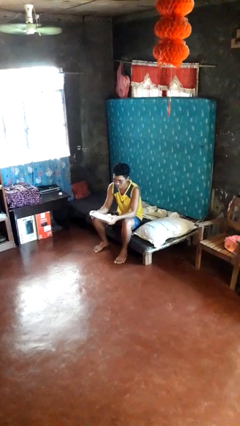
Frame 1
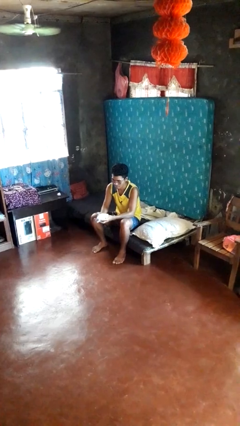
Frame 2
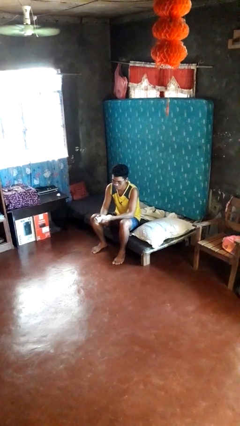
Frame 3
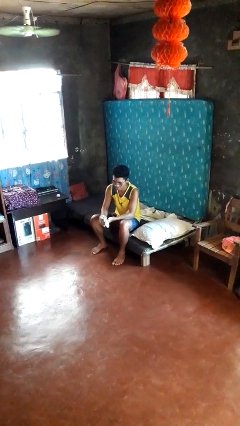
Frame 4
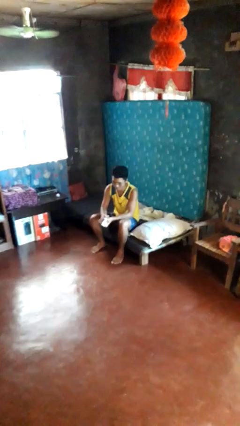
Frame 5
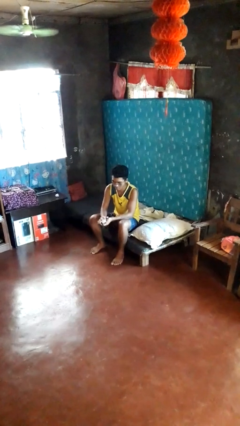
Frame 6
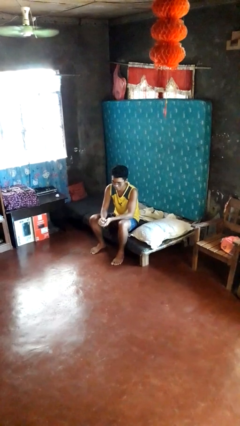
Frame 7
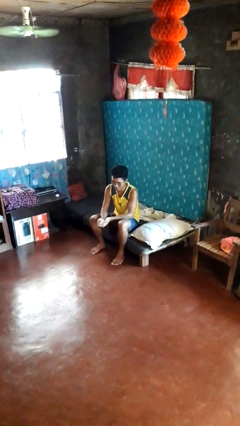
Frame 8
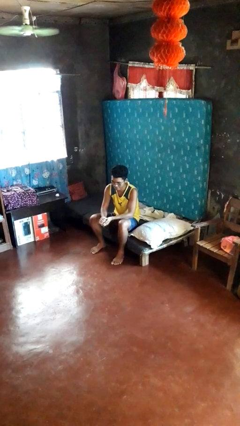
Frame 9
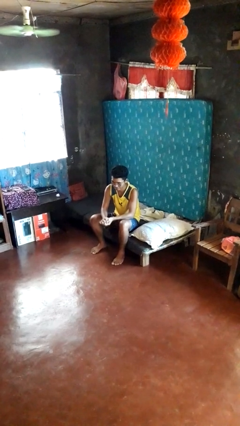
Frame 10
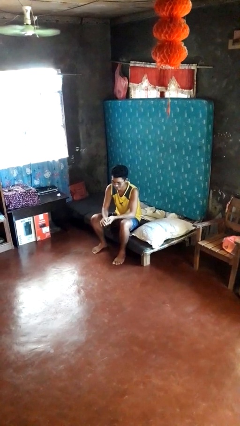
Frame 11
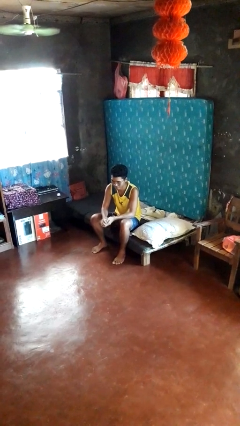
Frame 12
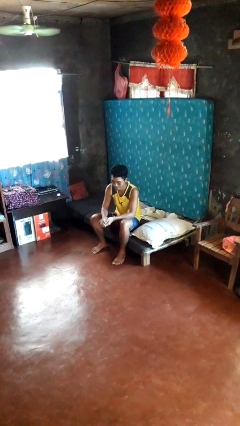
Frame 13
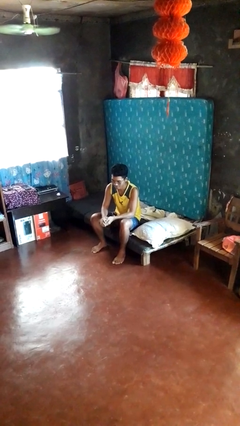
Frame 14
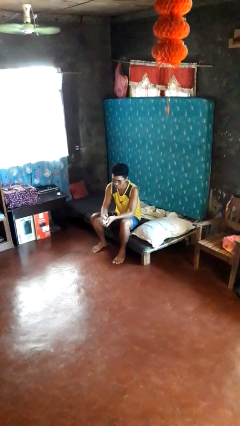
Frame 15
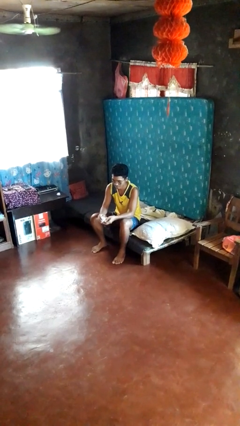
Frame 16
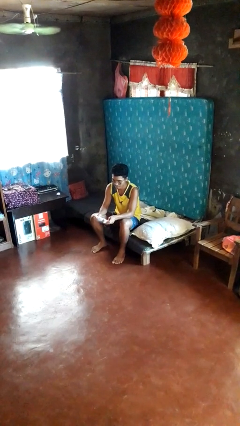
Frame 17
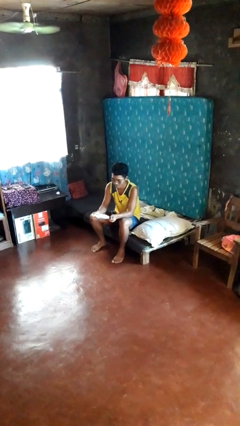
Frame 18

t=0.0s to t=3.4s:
person crumples paper

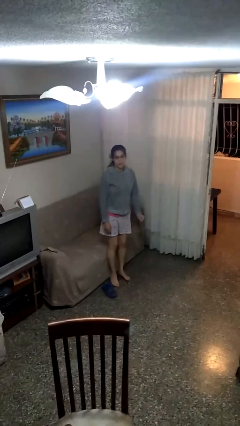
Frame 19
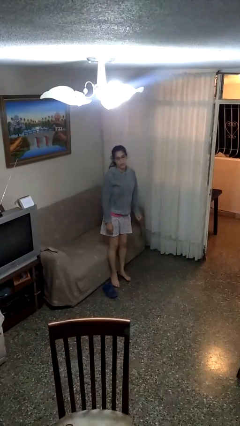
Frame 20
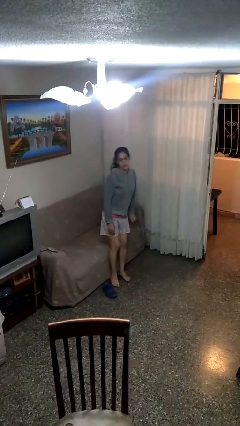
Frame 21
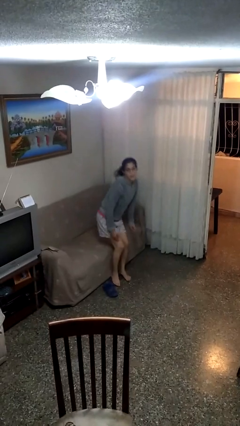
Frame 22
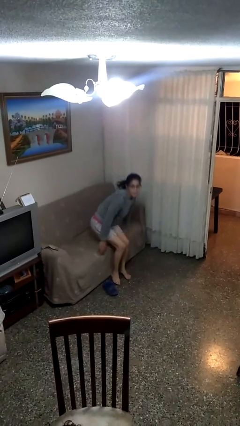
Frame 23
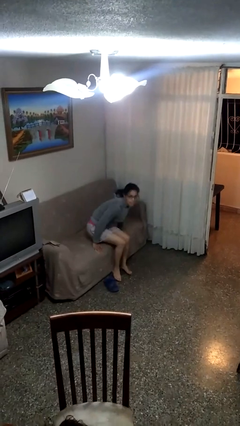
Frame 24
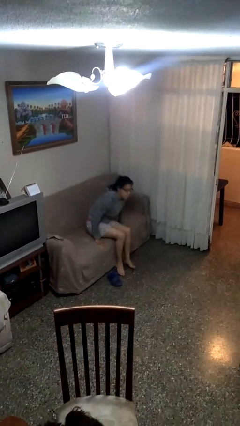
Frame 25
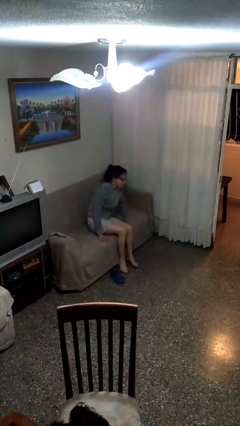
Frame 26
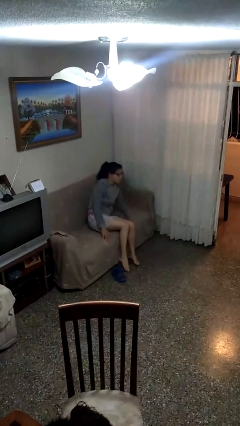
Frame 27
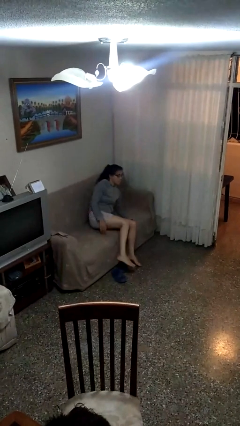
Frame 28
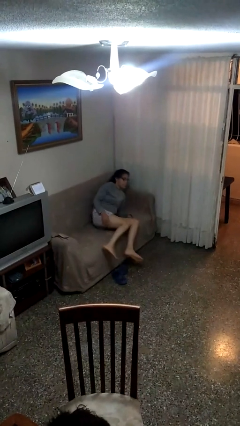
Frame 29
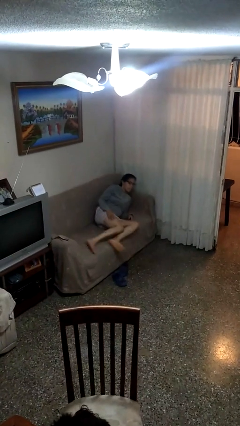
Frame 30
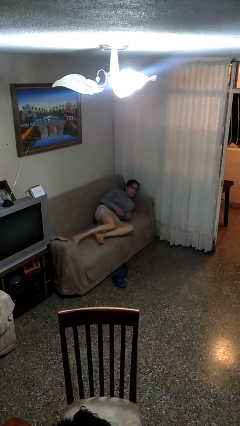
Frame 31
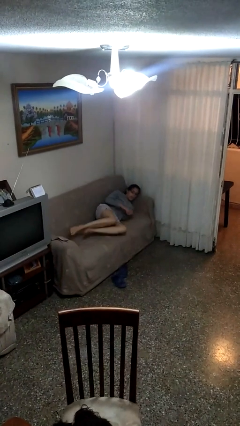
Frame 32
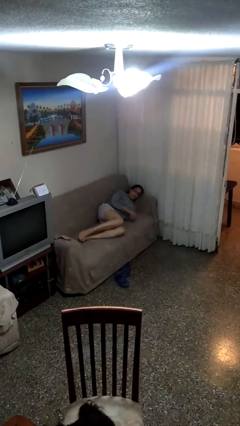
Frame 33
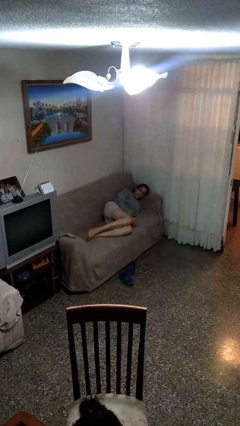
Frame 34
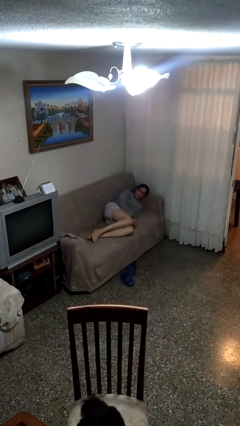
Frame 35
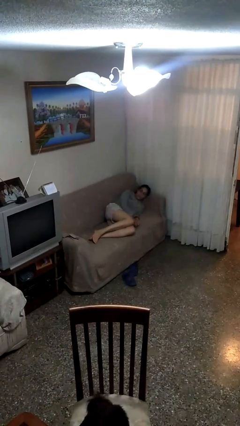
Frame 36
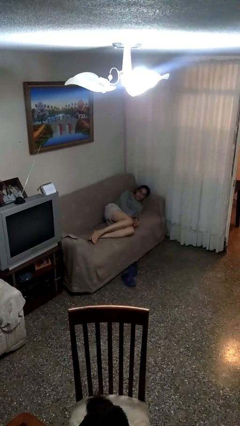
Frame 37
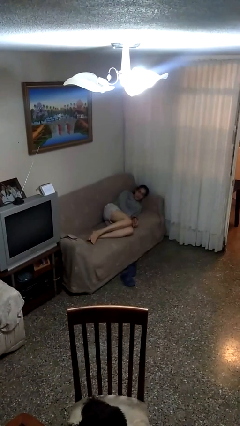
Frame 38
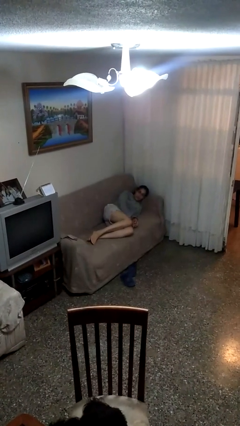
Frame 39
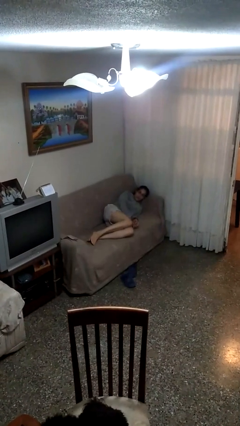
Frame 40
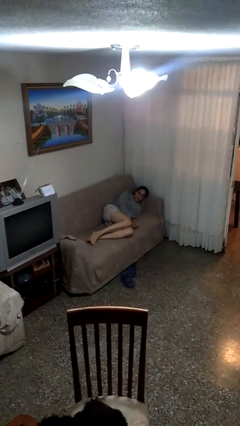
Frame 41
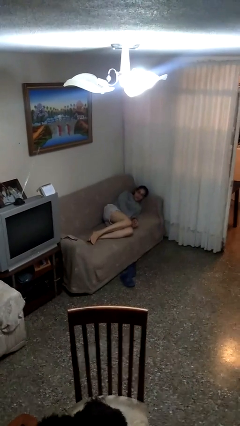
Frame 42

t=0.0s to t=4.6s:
person lies down on couch

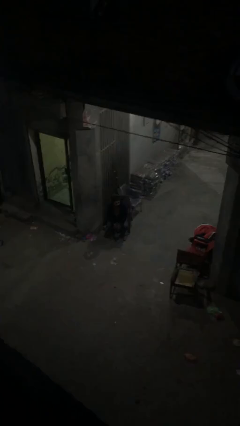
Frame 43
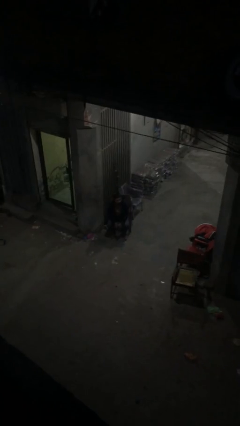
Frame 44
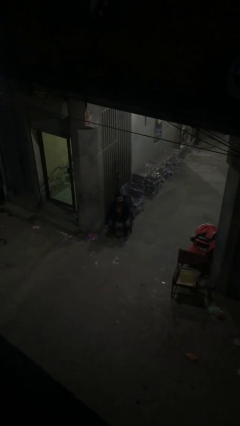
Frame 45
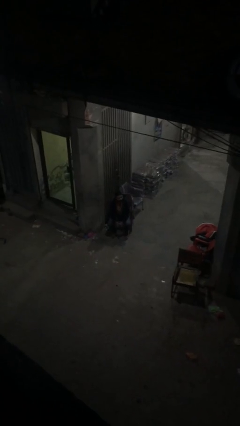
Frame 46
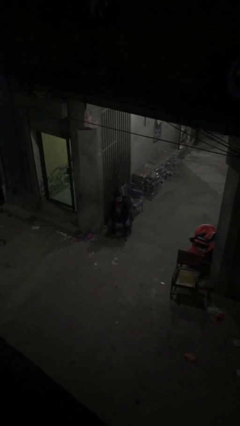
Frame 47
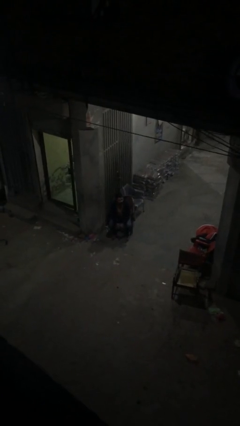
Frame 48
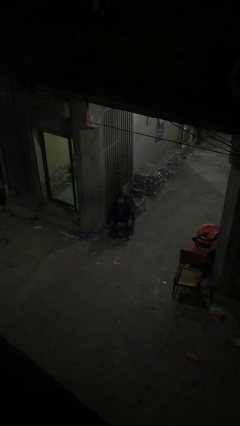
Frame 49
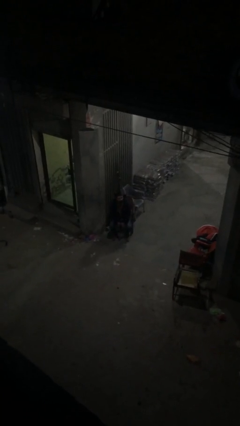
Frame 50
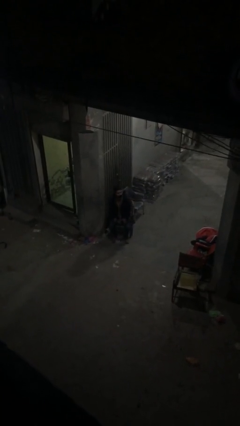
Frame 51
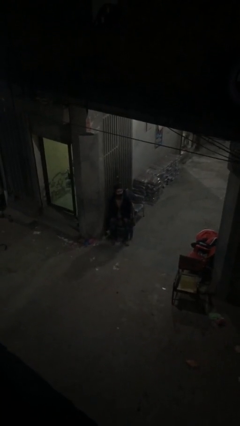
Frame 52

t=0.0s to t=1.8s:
person stands up

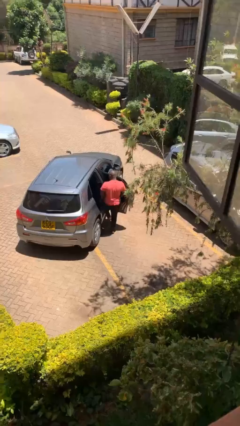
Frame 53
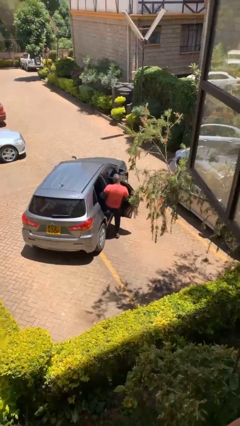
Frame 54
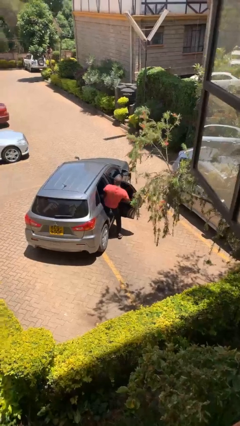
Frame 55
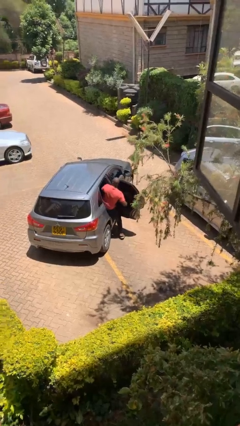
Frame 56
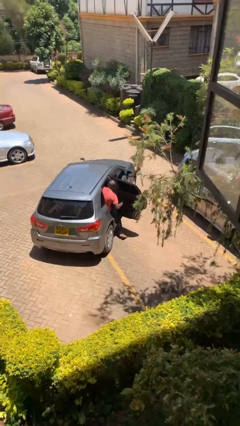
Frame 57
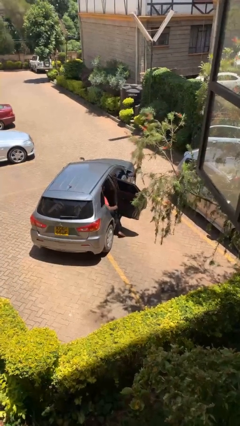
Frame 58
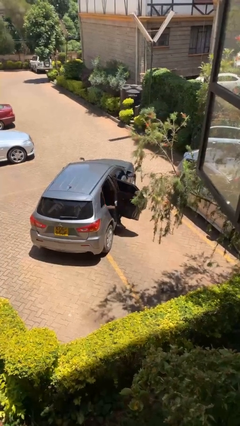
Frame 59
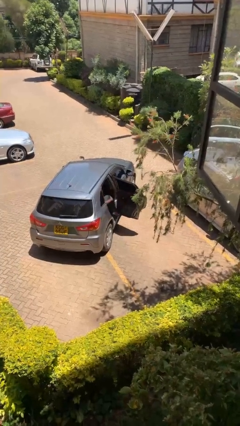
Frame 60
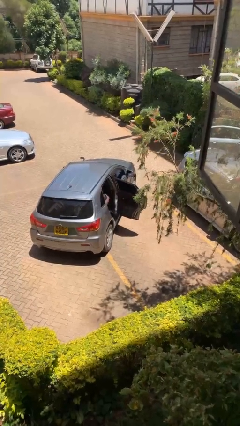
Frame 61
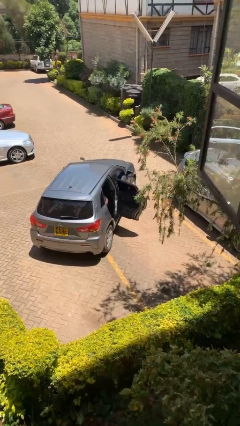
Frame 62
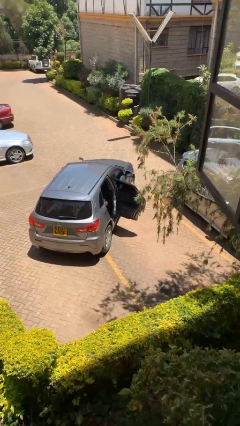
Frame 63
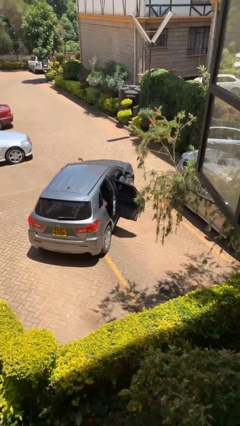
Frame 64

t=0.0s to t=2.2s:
person enters car

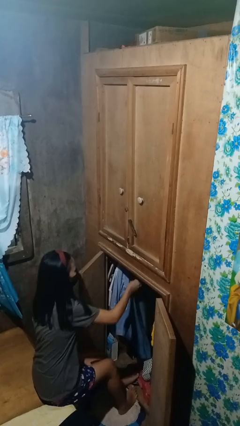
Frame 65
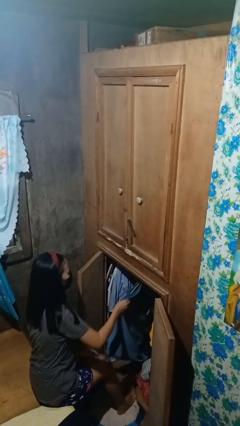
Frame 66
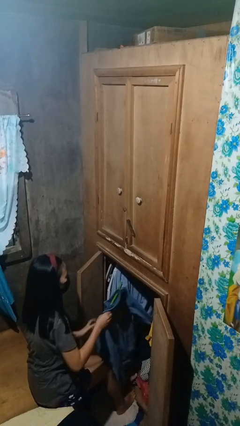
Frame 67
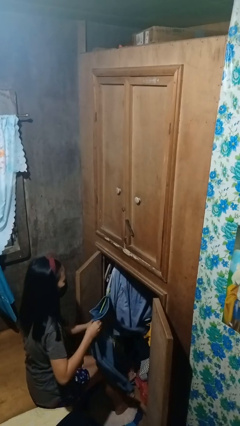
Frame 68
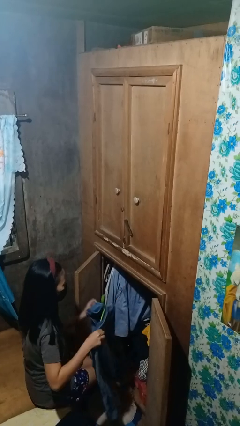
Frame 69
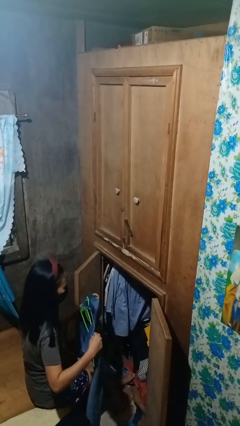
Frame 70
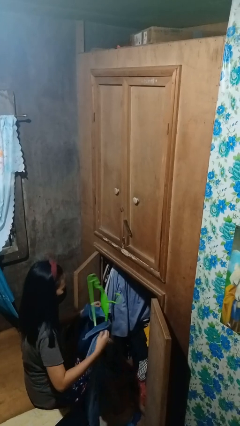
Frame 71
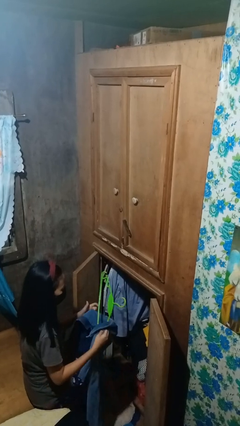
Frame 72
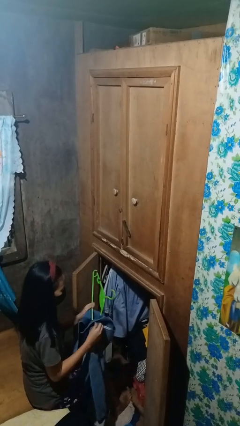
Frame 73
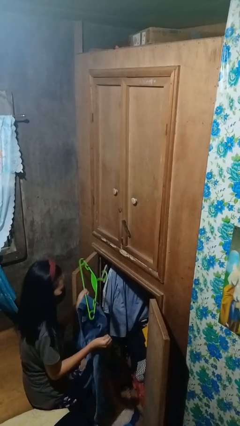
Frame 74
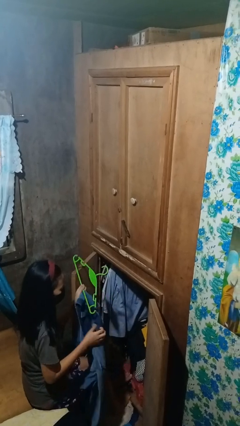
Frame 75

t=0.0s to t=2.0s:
person takes clothes from closet

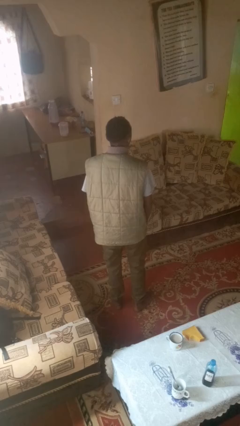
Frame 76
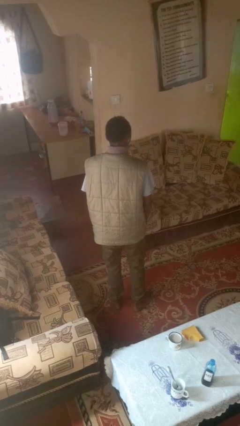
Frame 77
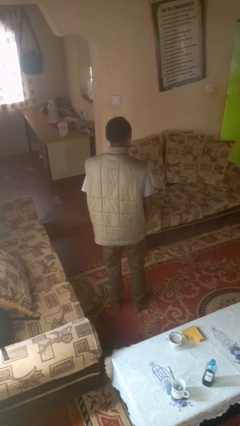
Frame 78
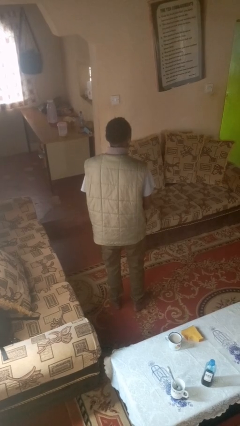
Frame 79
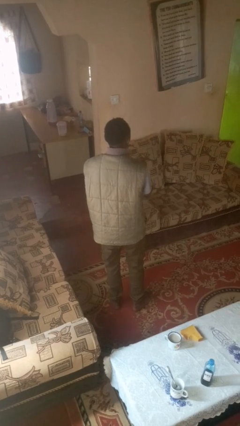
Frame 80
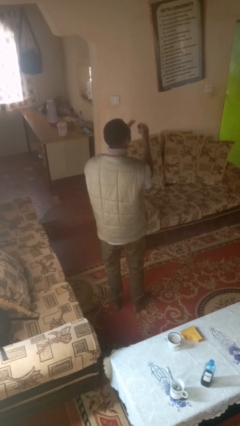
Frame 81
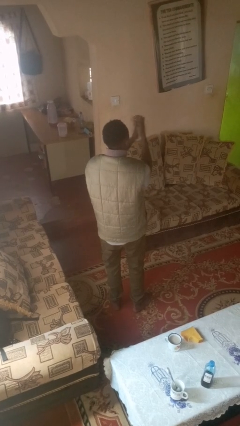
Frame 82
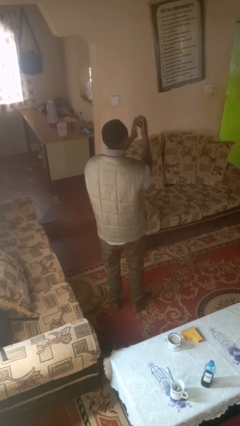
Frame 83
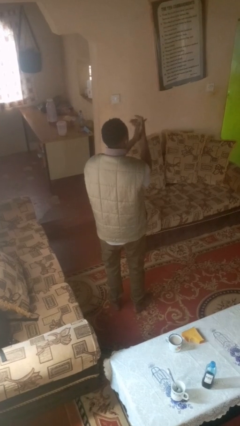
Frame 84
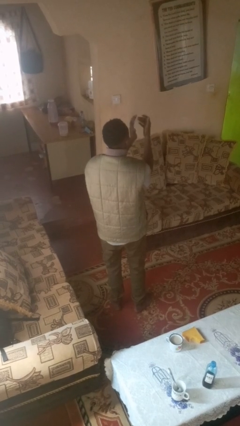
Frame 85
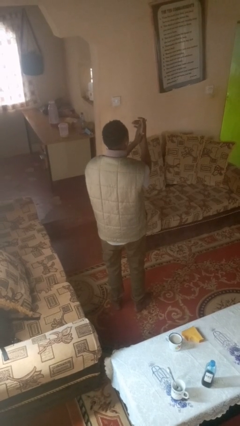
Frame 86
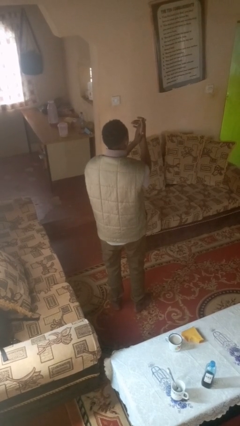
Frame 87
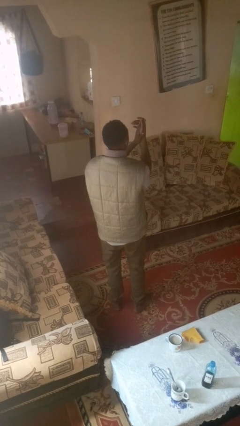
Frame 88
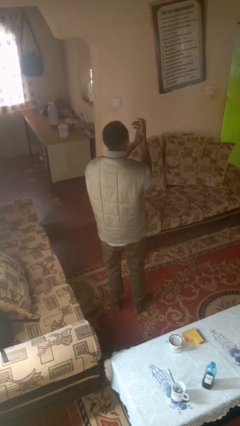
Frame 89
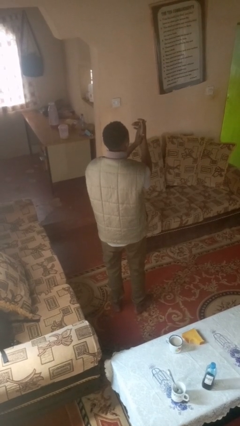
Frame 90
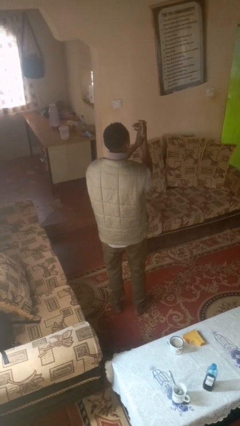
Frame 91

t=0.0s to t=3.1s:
person claps hands

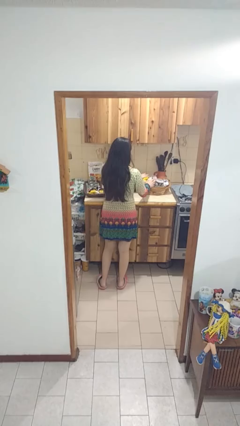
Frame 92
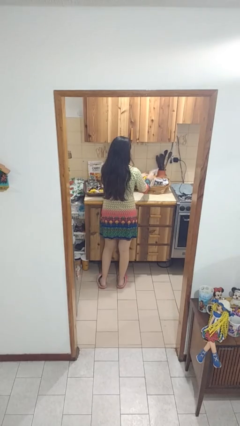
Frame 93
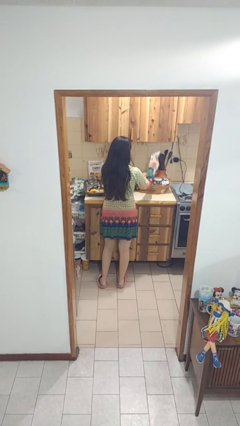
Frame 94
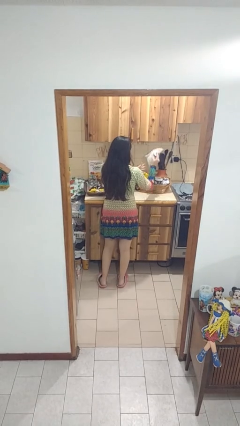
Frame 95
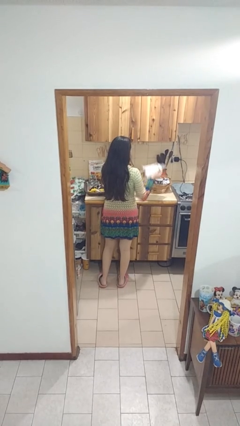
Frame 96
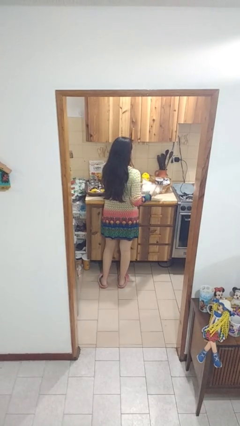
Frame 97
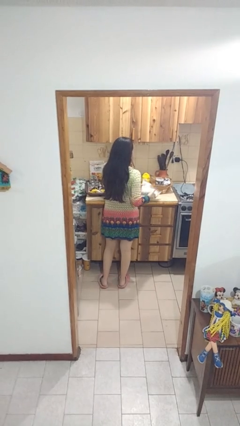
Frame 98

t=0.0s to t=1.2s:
person takes object from bag
